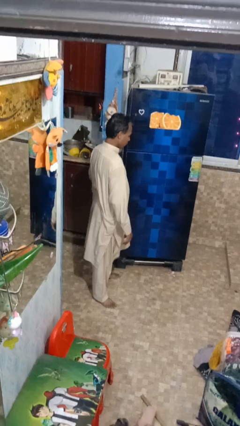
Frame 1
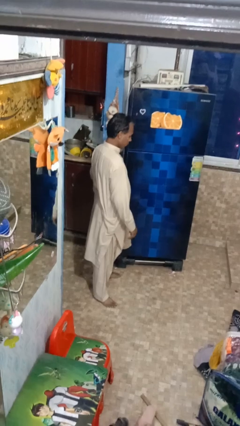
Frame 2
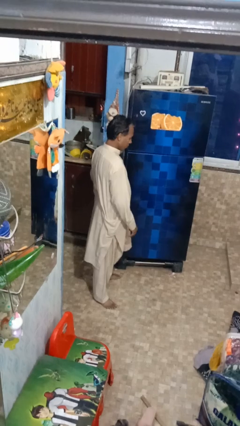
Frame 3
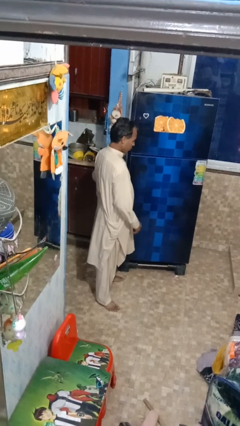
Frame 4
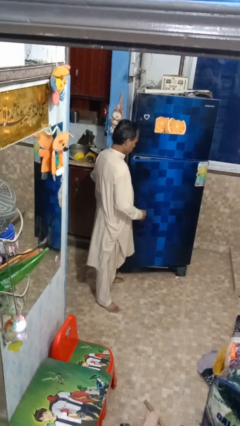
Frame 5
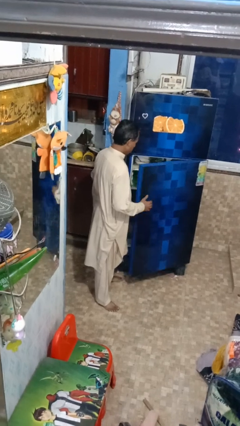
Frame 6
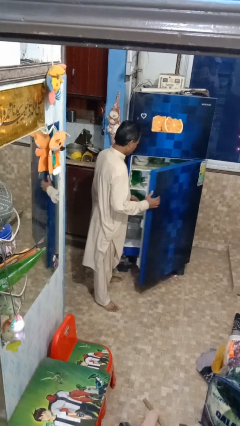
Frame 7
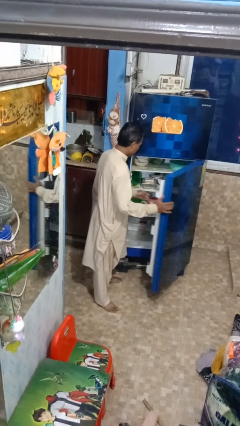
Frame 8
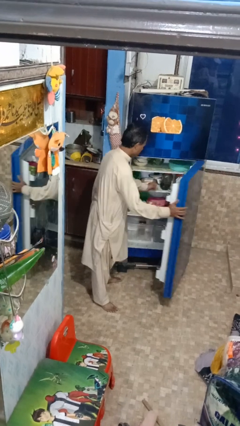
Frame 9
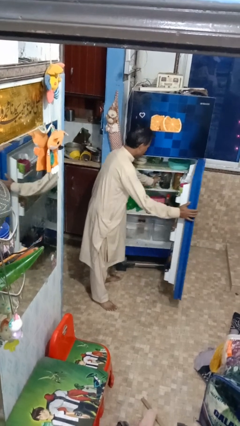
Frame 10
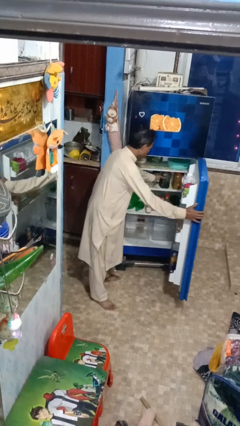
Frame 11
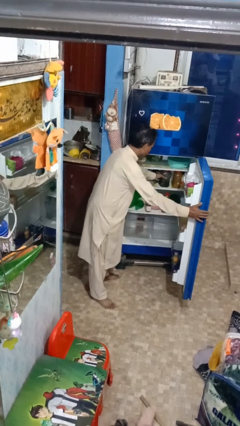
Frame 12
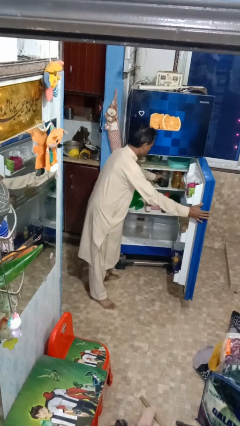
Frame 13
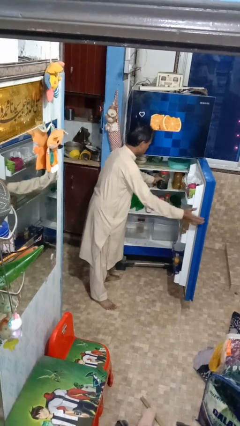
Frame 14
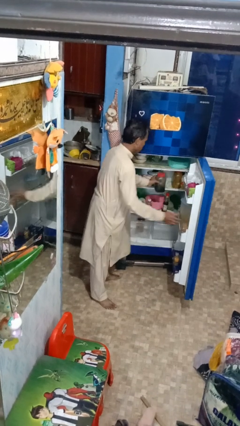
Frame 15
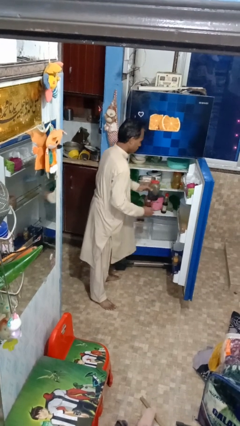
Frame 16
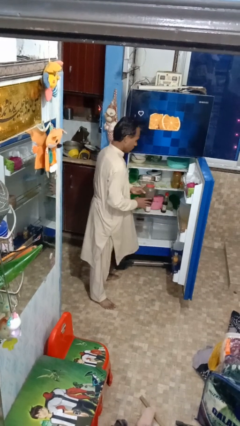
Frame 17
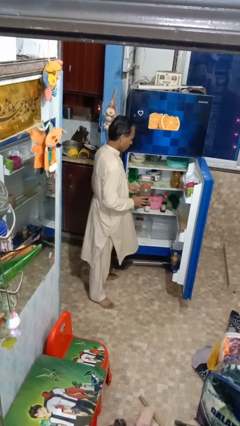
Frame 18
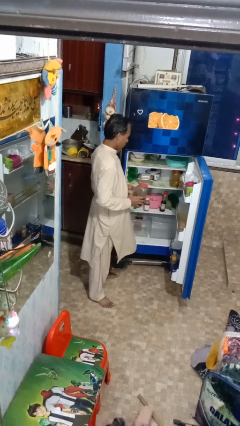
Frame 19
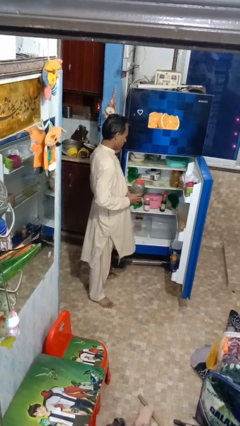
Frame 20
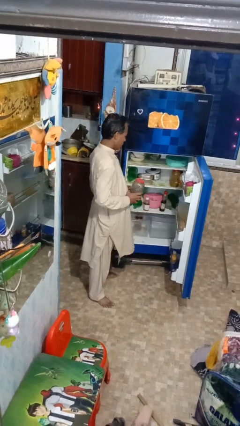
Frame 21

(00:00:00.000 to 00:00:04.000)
person puts object into refrigerator

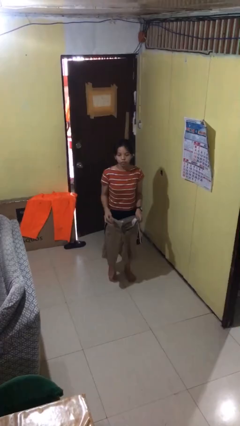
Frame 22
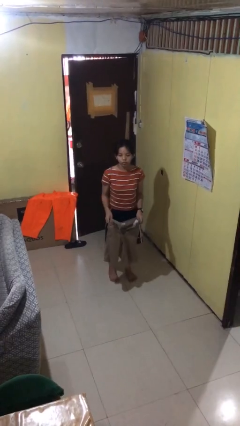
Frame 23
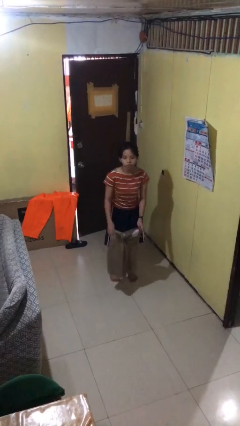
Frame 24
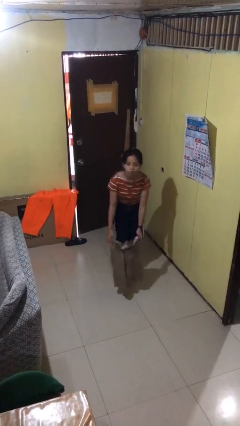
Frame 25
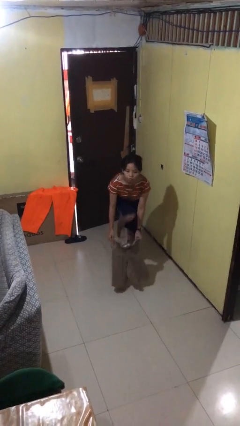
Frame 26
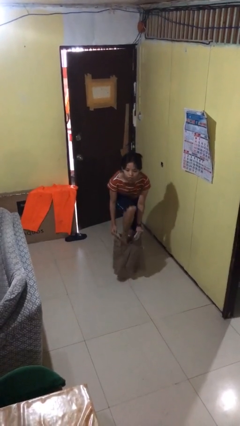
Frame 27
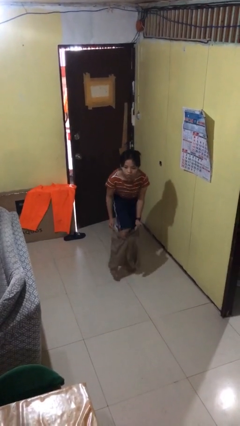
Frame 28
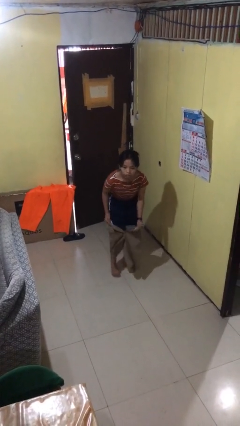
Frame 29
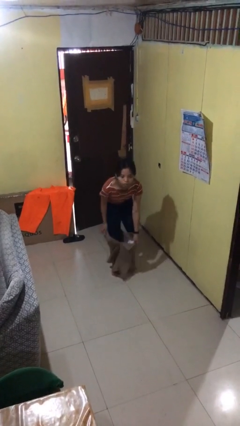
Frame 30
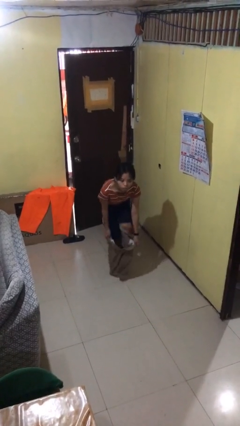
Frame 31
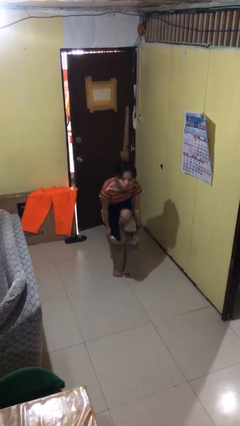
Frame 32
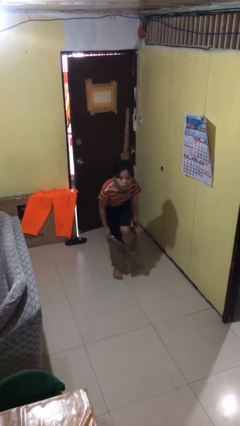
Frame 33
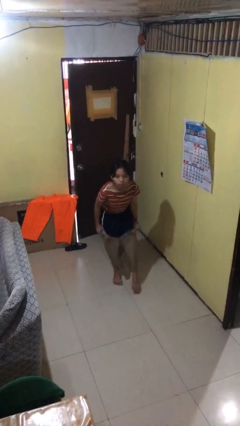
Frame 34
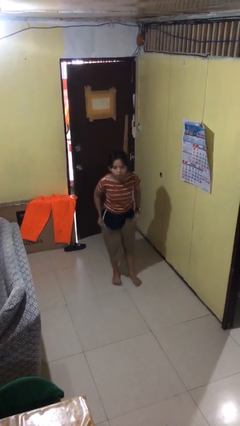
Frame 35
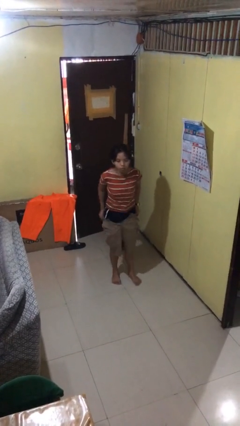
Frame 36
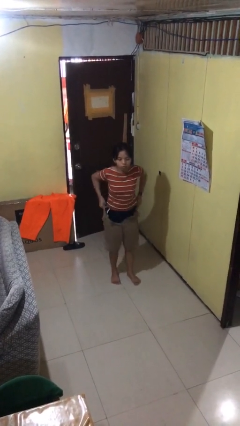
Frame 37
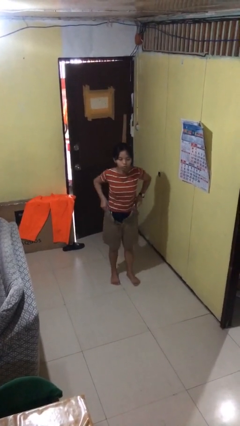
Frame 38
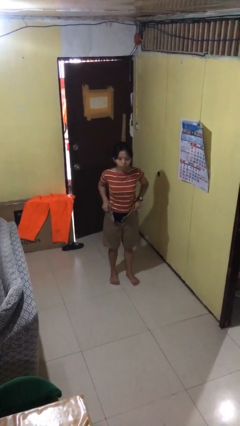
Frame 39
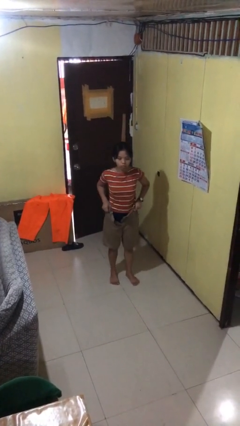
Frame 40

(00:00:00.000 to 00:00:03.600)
person puts on pants

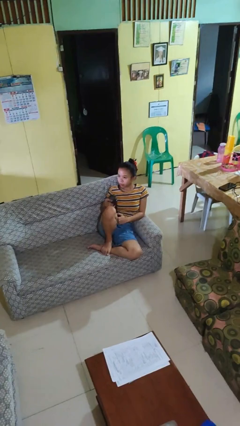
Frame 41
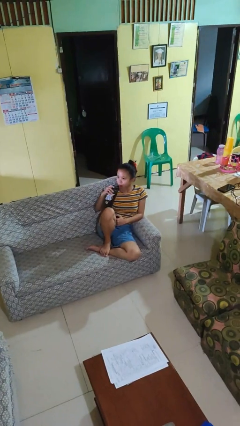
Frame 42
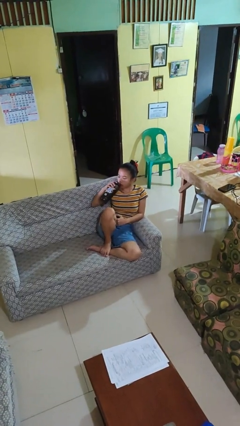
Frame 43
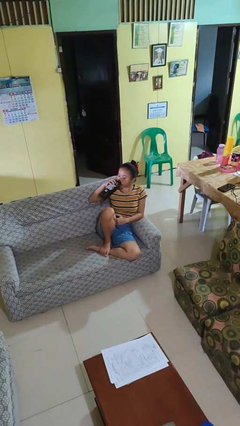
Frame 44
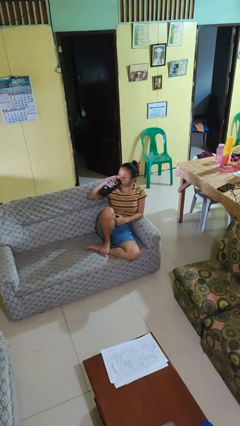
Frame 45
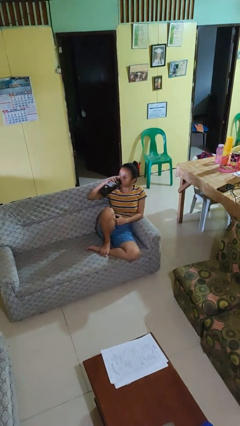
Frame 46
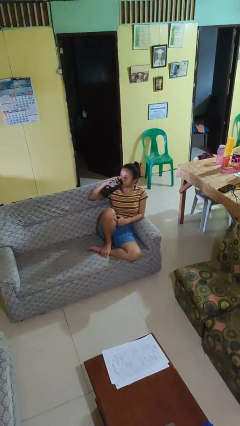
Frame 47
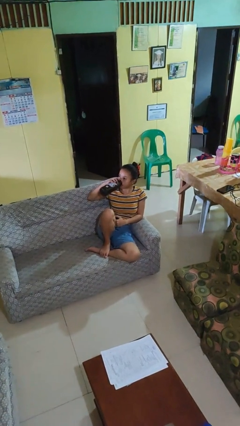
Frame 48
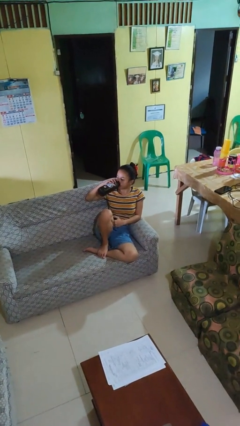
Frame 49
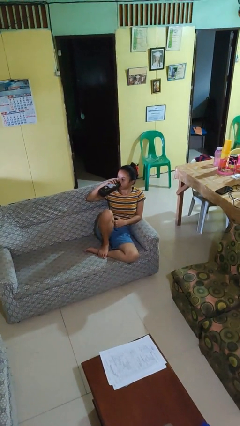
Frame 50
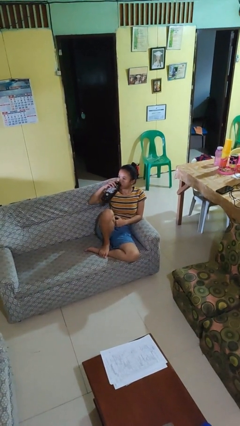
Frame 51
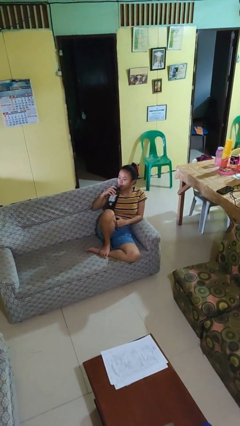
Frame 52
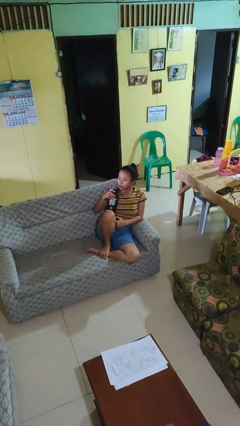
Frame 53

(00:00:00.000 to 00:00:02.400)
person drinks from bottle

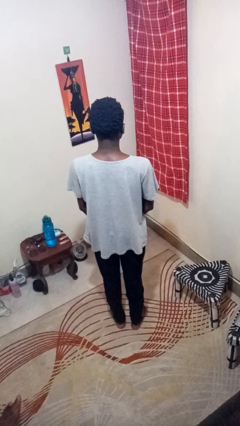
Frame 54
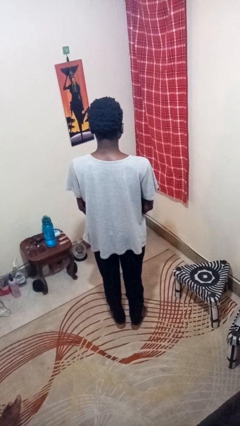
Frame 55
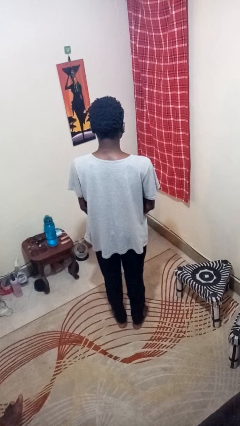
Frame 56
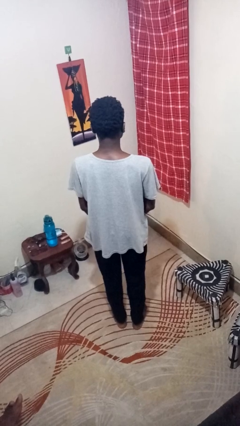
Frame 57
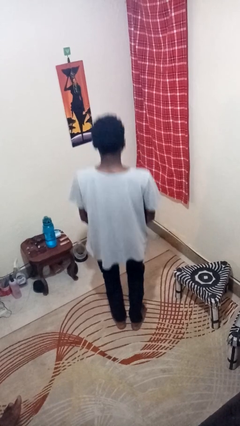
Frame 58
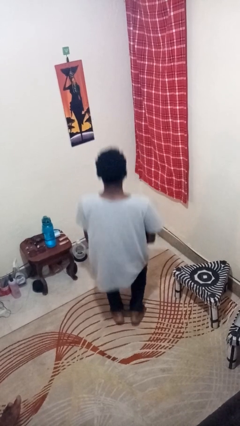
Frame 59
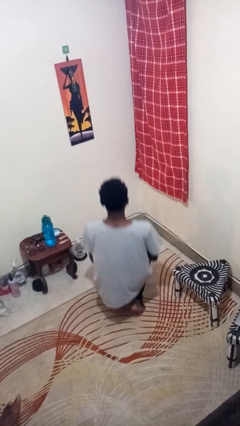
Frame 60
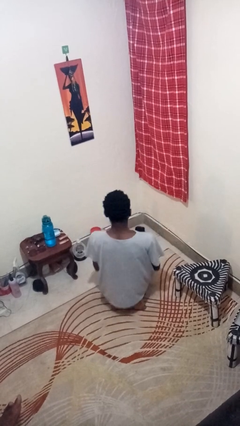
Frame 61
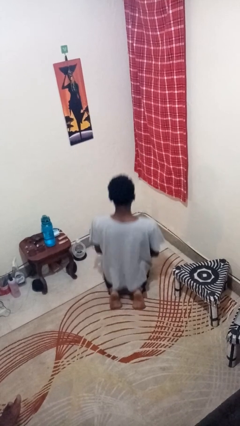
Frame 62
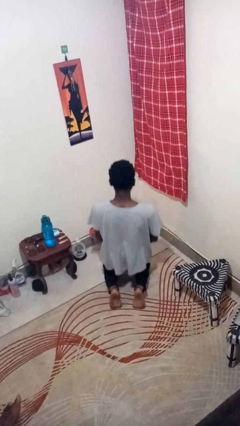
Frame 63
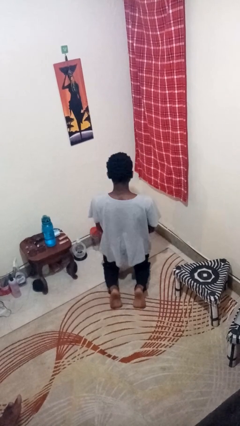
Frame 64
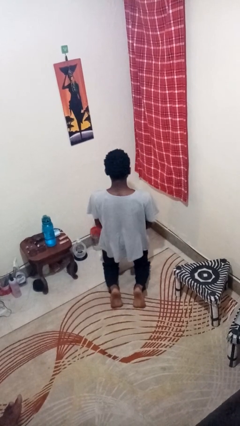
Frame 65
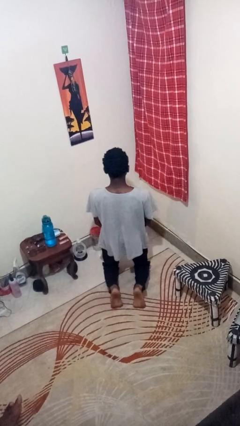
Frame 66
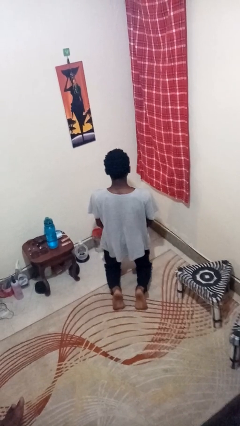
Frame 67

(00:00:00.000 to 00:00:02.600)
person kneels

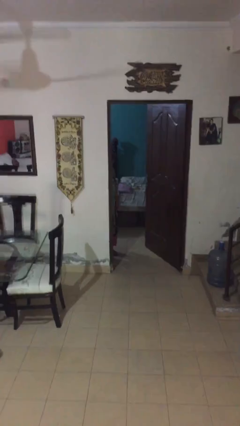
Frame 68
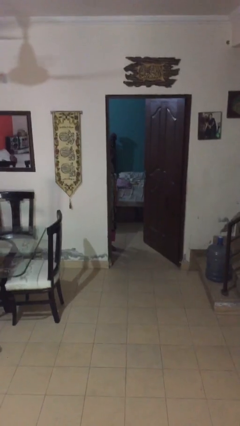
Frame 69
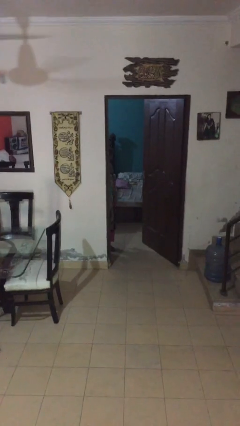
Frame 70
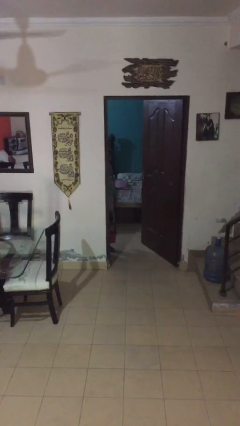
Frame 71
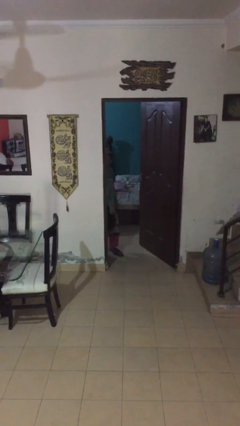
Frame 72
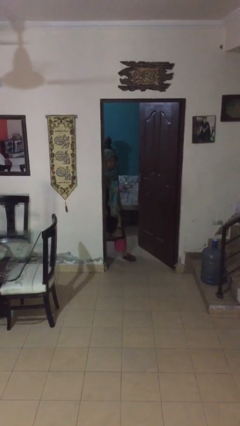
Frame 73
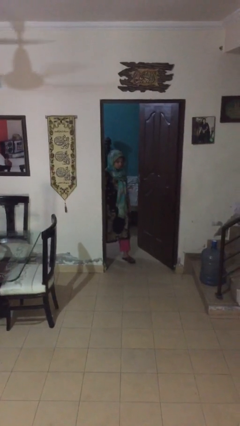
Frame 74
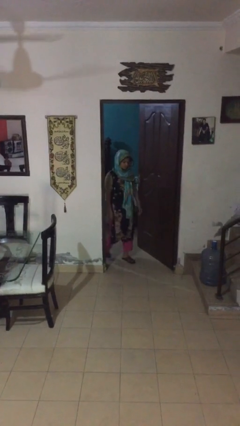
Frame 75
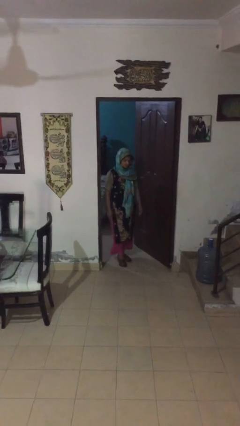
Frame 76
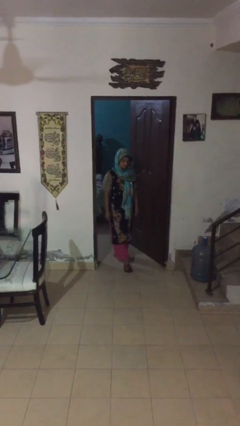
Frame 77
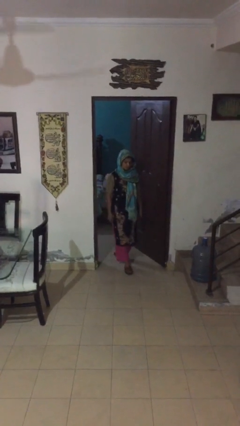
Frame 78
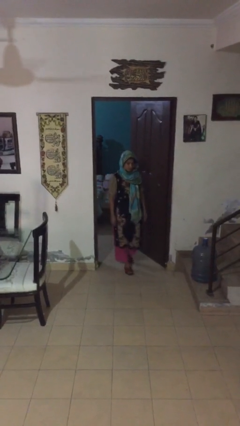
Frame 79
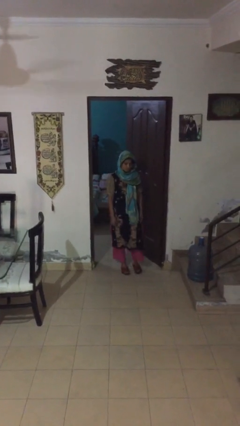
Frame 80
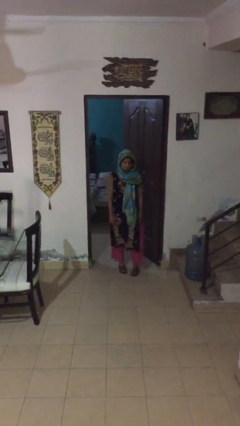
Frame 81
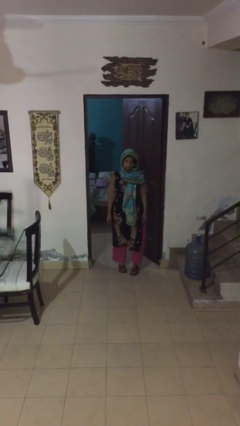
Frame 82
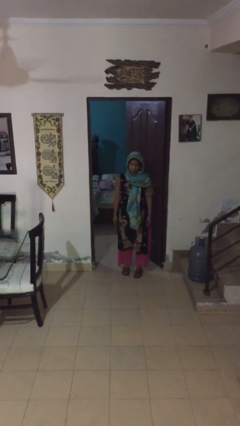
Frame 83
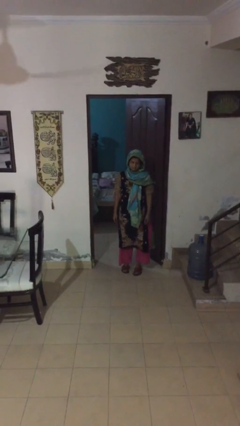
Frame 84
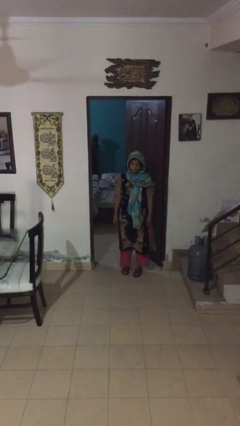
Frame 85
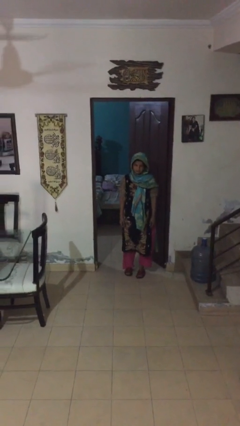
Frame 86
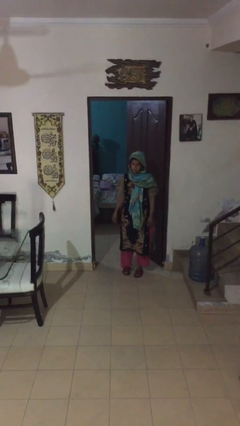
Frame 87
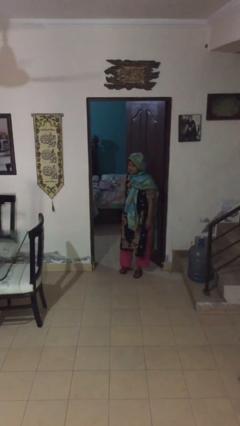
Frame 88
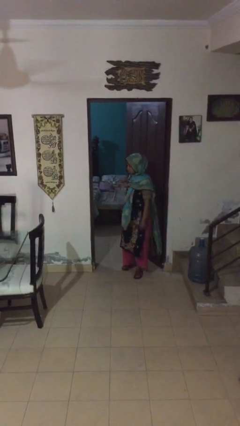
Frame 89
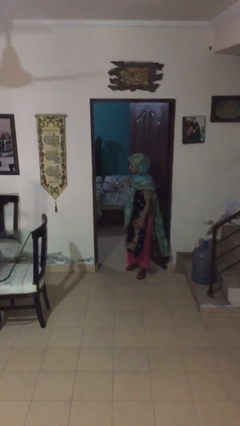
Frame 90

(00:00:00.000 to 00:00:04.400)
person enters scene through structure

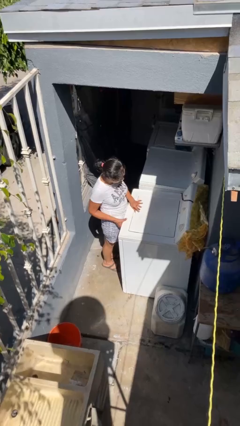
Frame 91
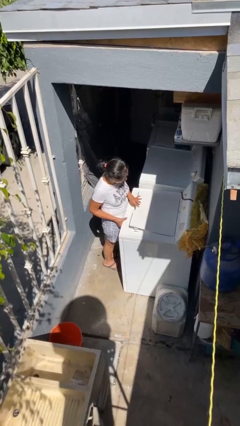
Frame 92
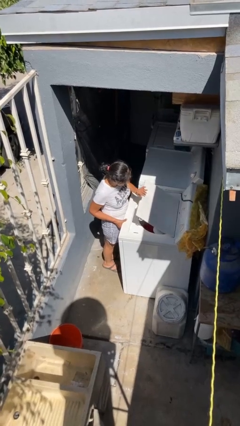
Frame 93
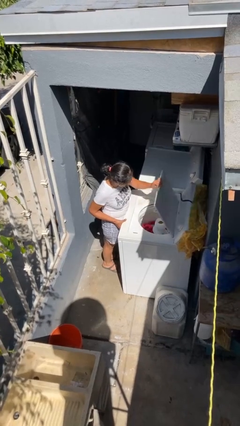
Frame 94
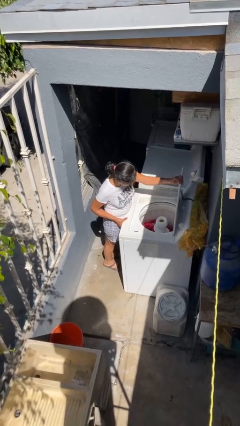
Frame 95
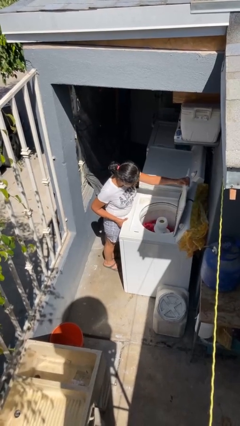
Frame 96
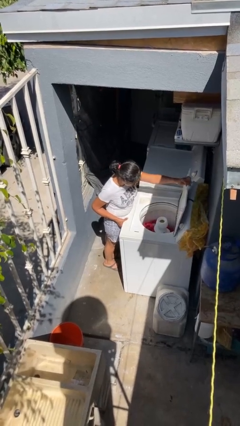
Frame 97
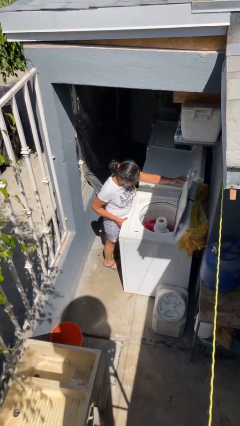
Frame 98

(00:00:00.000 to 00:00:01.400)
person opens clothes washer
